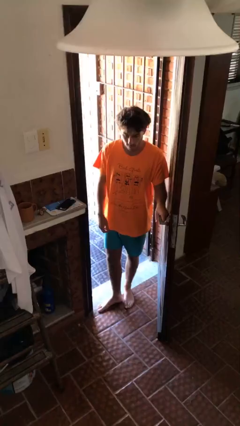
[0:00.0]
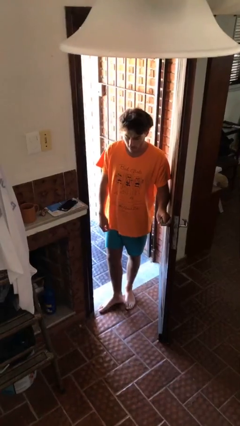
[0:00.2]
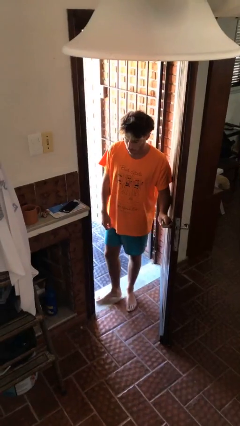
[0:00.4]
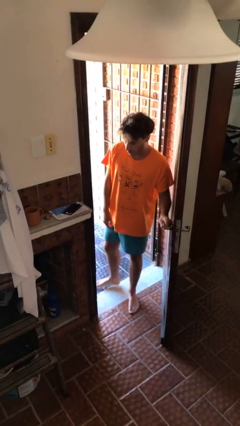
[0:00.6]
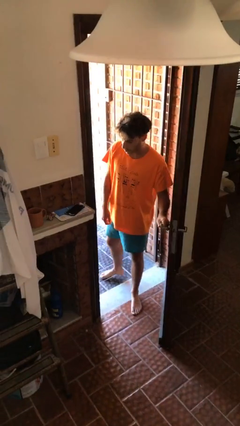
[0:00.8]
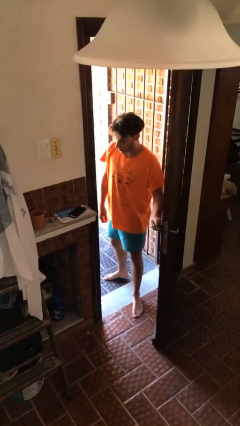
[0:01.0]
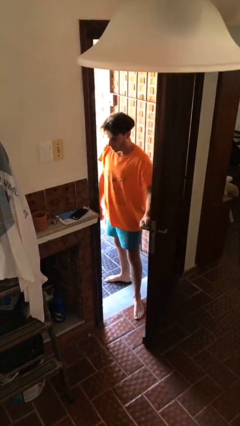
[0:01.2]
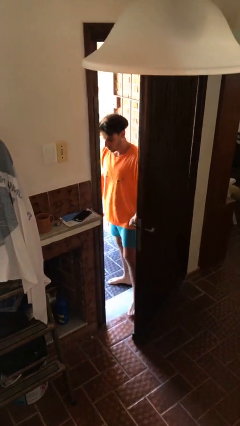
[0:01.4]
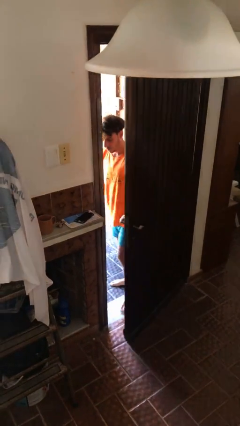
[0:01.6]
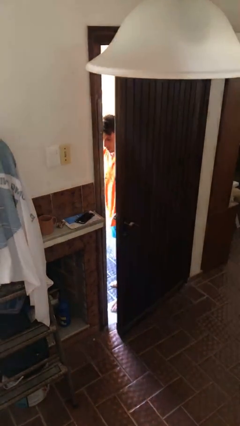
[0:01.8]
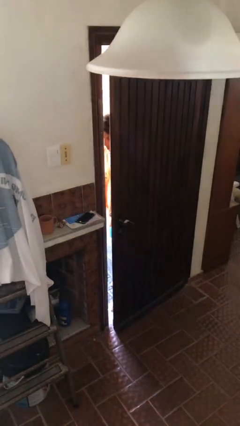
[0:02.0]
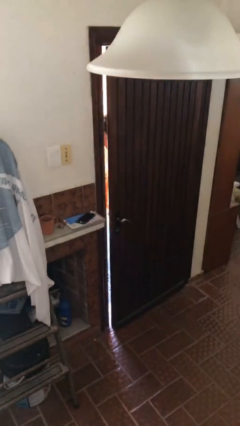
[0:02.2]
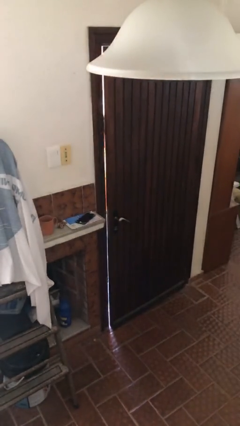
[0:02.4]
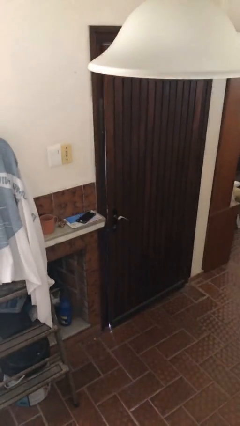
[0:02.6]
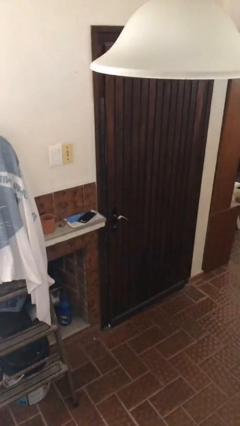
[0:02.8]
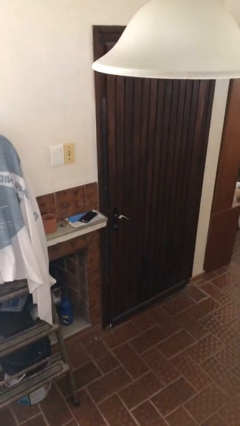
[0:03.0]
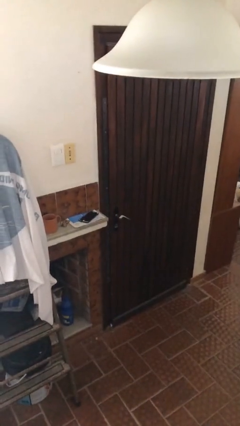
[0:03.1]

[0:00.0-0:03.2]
person closes facility door

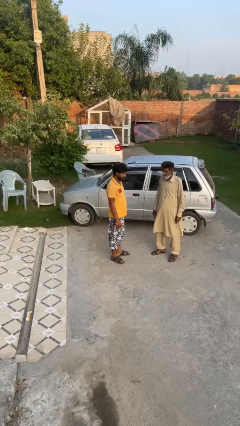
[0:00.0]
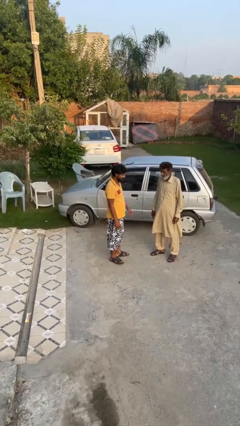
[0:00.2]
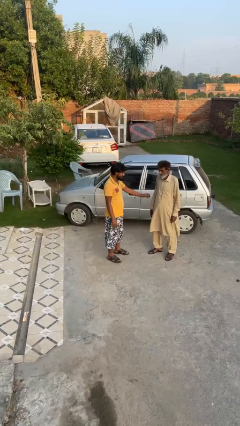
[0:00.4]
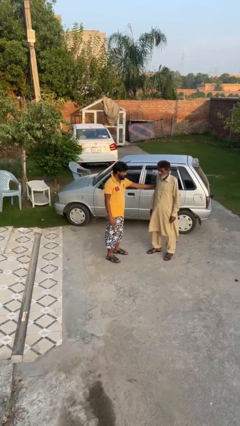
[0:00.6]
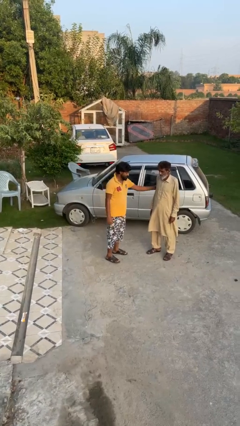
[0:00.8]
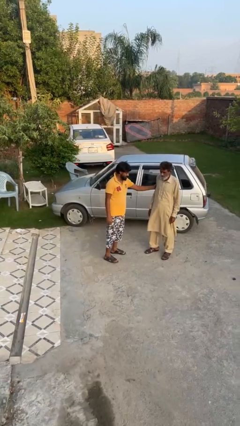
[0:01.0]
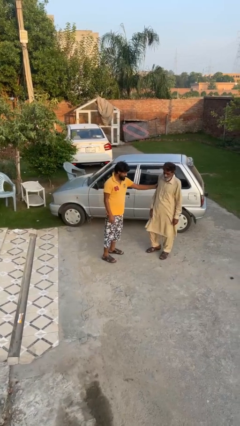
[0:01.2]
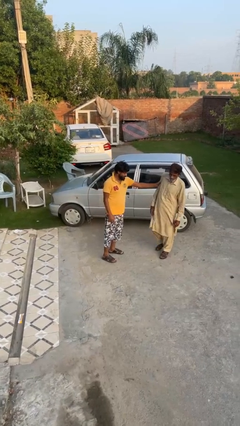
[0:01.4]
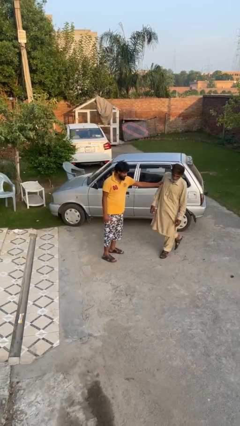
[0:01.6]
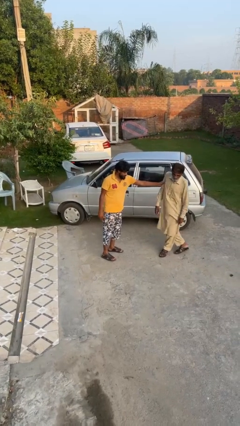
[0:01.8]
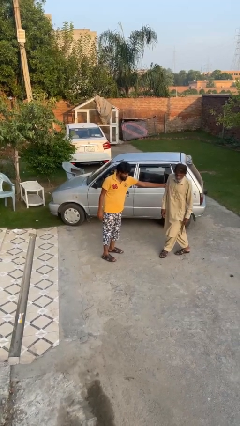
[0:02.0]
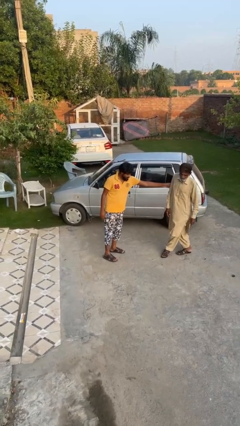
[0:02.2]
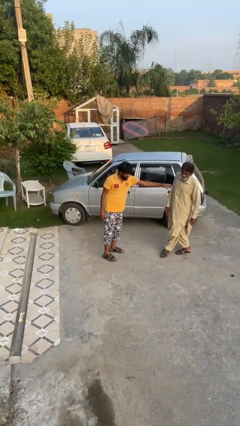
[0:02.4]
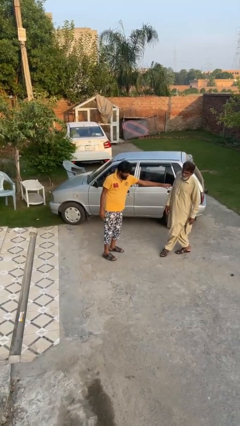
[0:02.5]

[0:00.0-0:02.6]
person shoves person

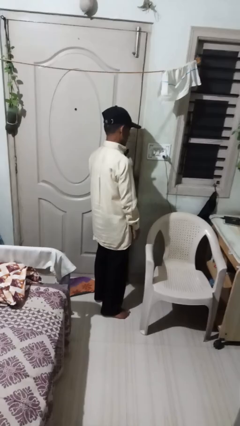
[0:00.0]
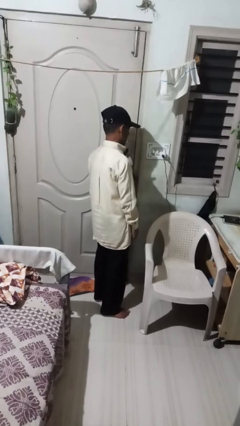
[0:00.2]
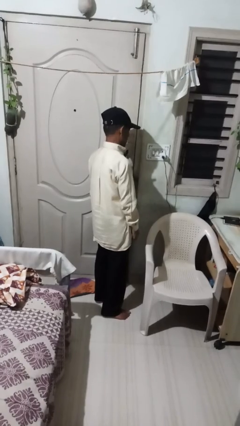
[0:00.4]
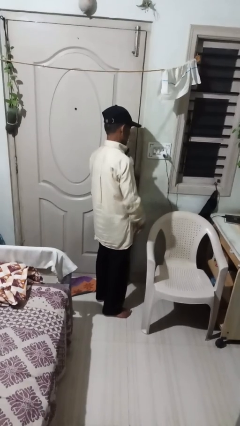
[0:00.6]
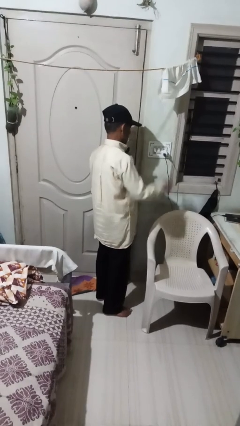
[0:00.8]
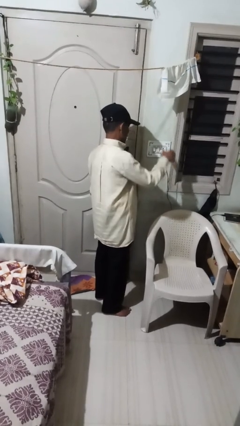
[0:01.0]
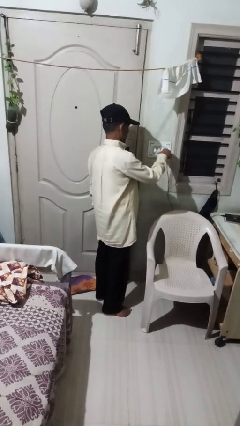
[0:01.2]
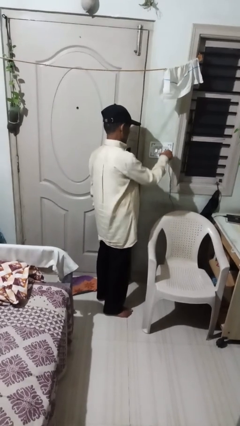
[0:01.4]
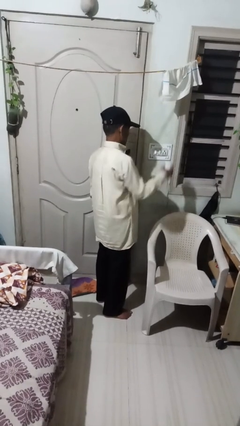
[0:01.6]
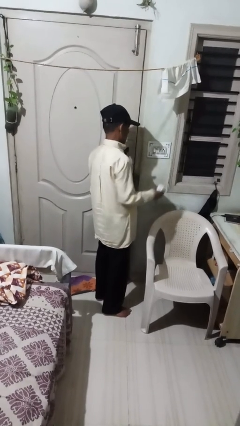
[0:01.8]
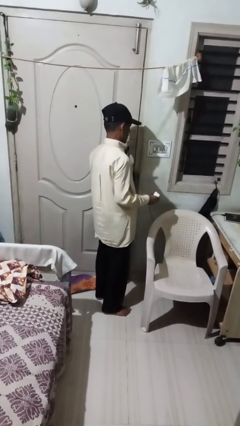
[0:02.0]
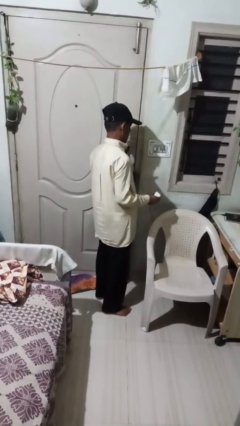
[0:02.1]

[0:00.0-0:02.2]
person unplugs from electrical socket

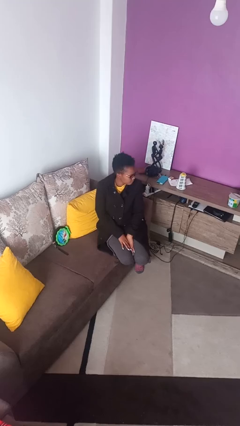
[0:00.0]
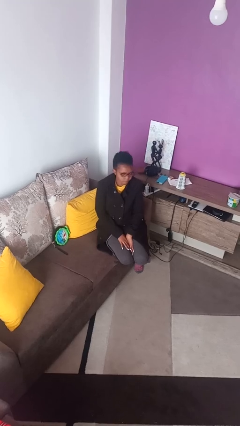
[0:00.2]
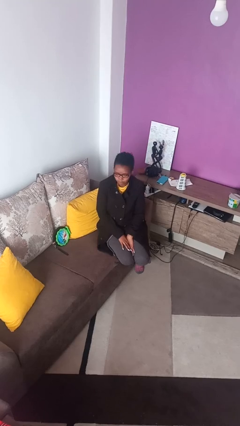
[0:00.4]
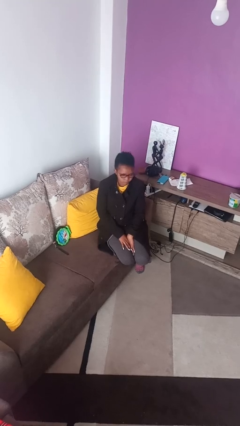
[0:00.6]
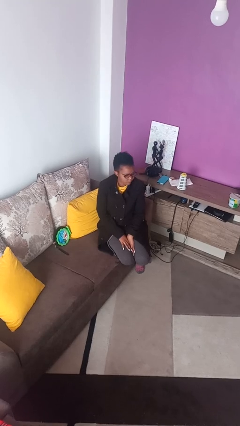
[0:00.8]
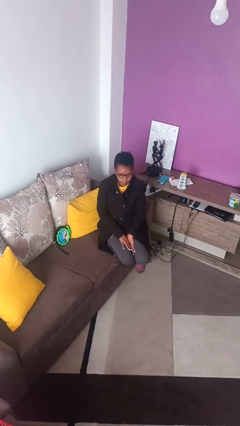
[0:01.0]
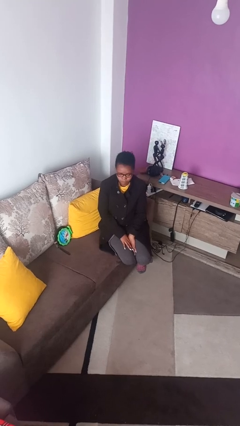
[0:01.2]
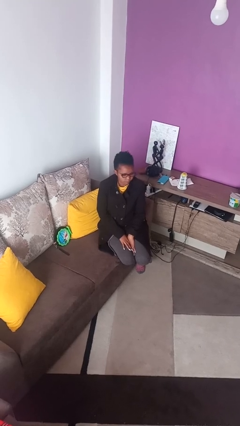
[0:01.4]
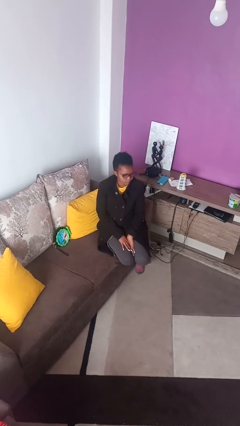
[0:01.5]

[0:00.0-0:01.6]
person shakes head

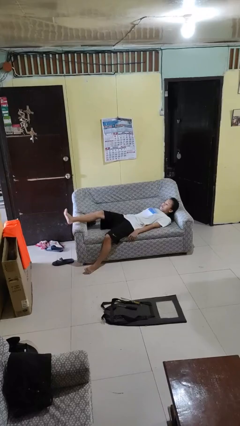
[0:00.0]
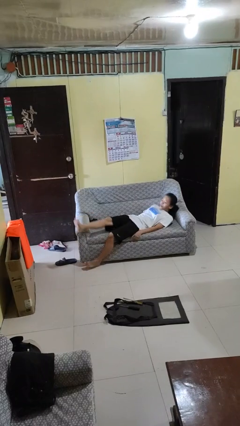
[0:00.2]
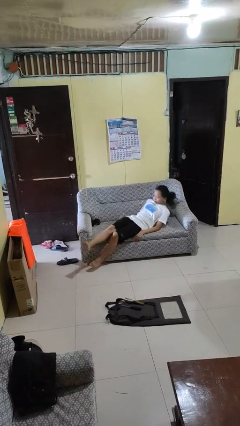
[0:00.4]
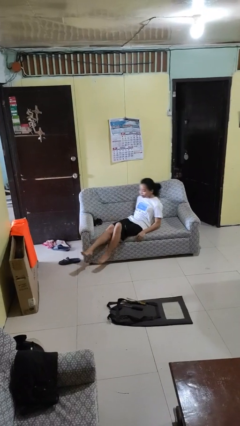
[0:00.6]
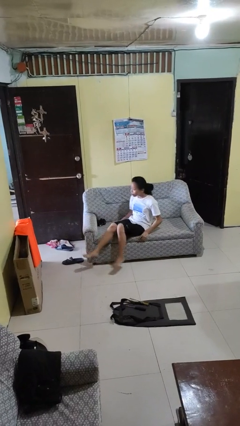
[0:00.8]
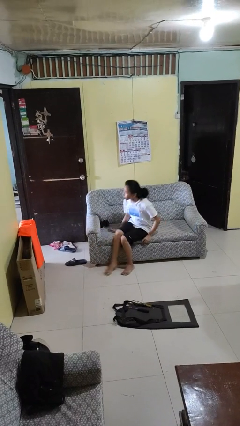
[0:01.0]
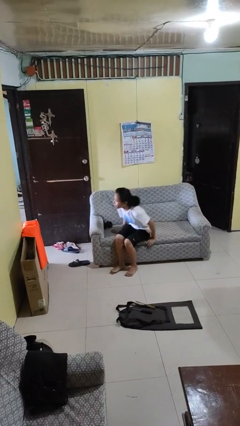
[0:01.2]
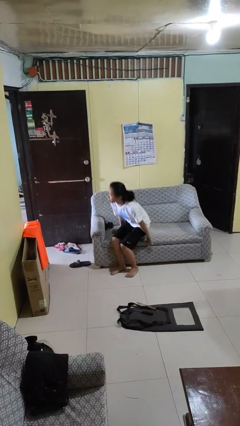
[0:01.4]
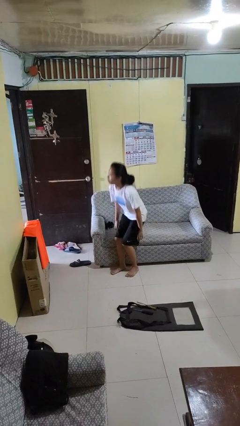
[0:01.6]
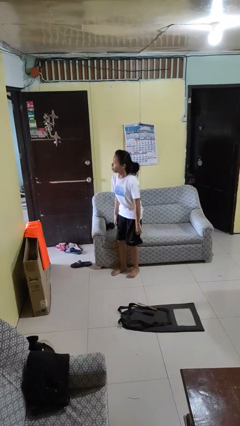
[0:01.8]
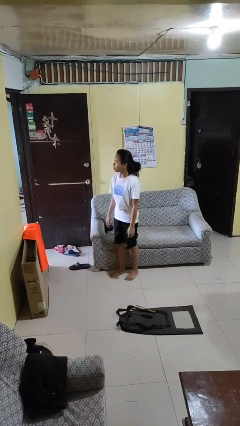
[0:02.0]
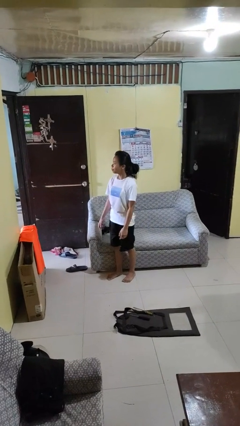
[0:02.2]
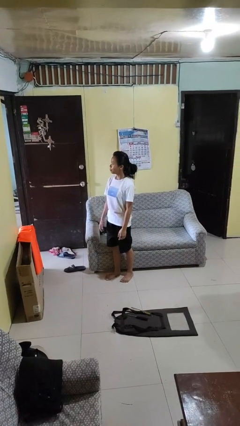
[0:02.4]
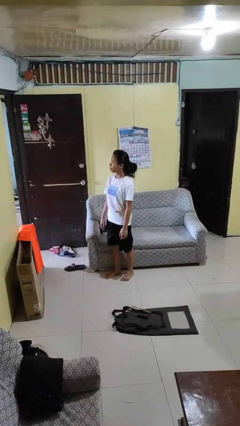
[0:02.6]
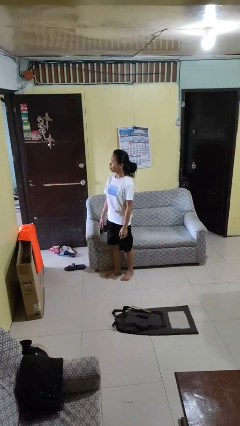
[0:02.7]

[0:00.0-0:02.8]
person stands up

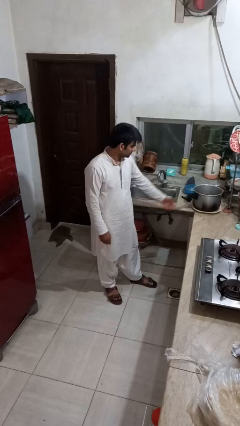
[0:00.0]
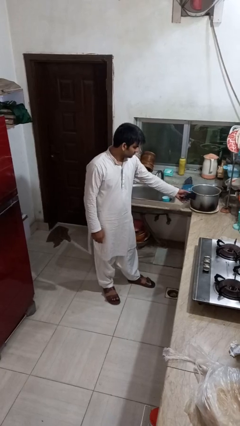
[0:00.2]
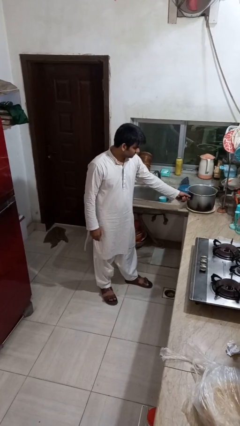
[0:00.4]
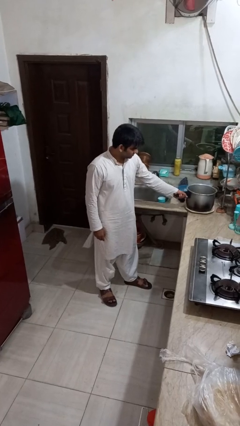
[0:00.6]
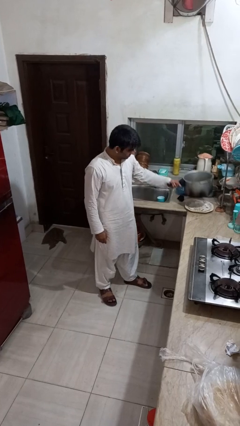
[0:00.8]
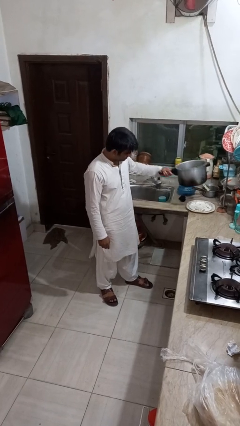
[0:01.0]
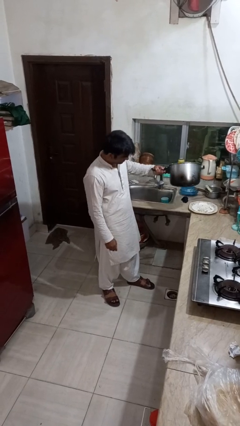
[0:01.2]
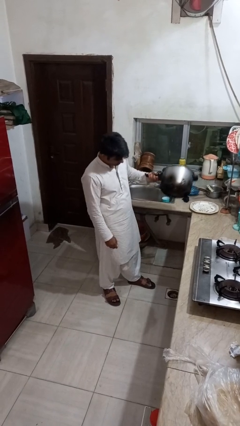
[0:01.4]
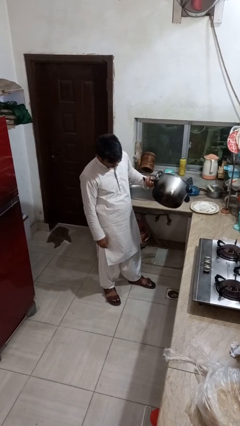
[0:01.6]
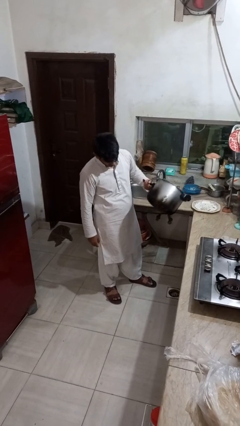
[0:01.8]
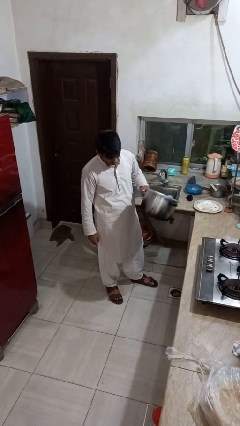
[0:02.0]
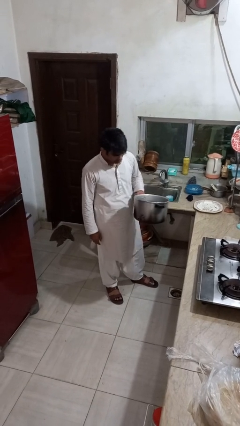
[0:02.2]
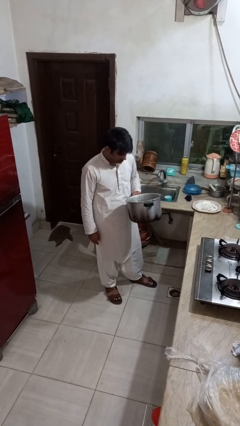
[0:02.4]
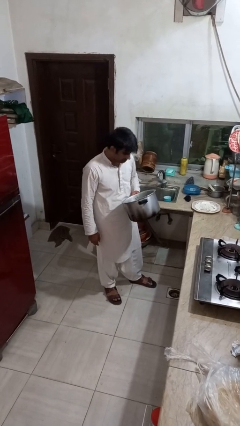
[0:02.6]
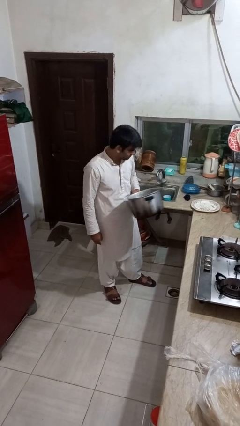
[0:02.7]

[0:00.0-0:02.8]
person picks up object from countertop

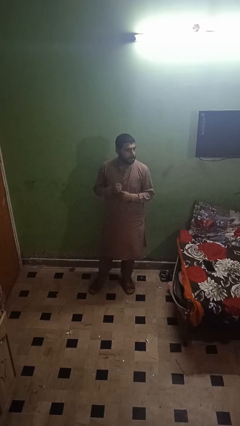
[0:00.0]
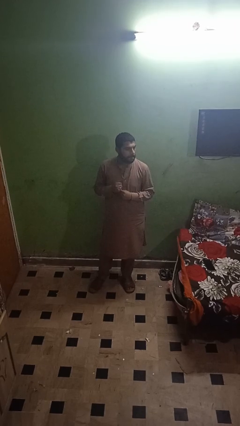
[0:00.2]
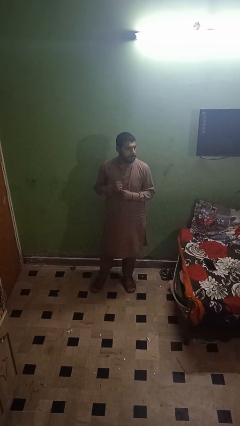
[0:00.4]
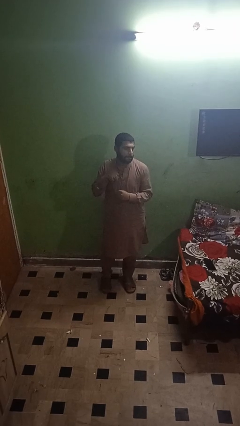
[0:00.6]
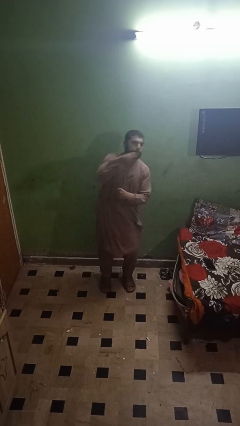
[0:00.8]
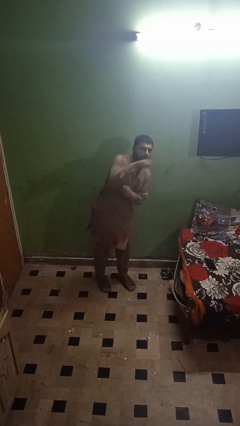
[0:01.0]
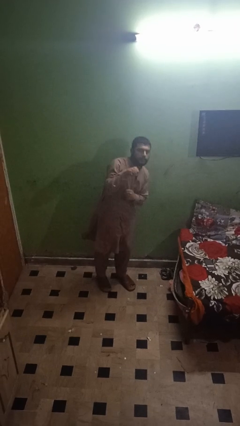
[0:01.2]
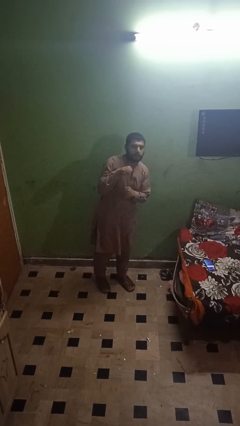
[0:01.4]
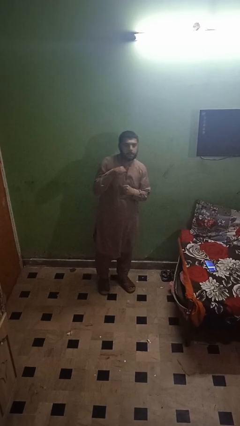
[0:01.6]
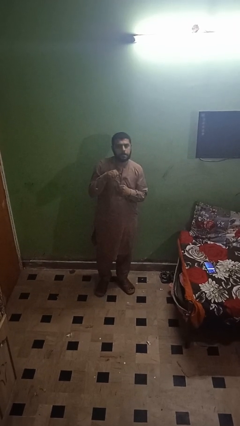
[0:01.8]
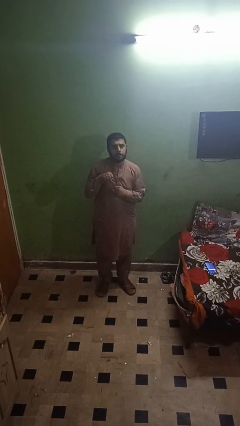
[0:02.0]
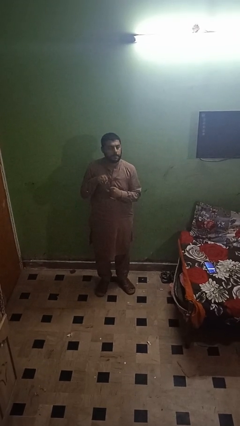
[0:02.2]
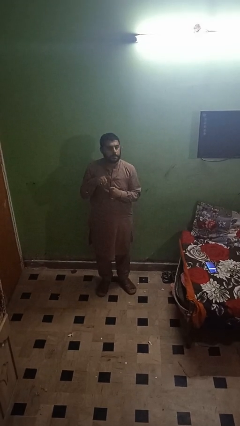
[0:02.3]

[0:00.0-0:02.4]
person punches
